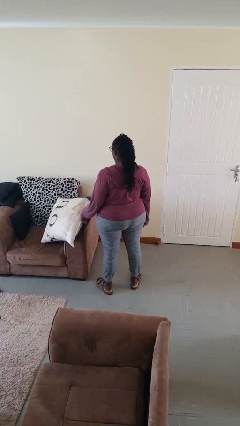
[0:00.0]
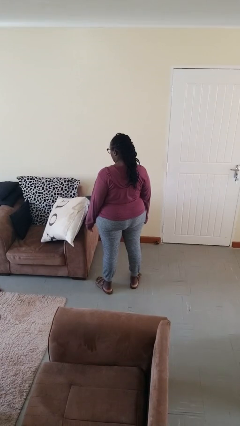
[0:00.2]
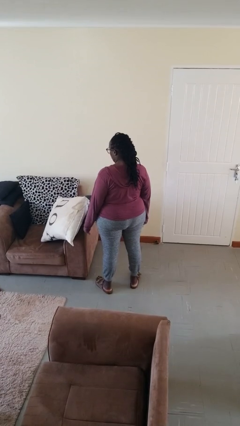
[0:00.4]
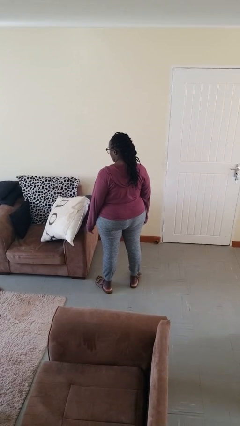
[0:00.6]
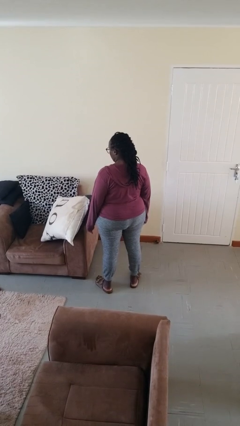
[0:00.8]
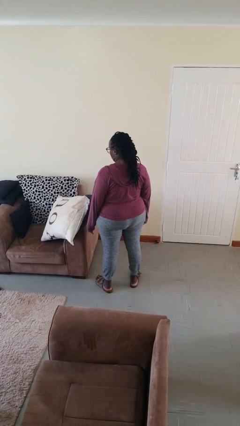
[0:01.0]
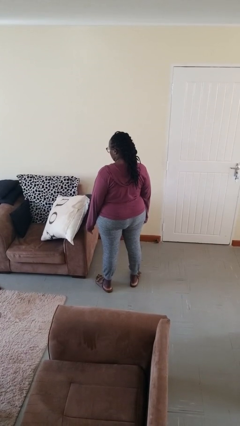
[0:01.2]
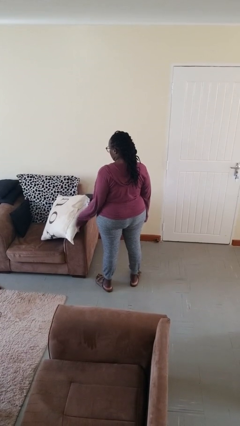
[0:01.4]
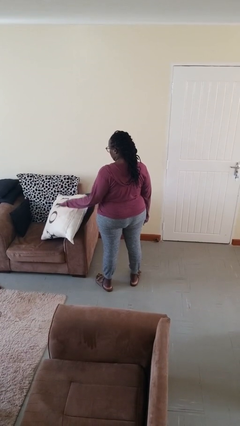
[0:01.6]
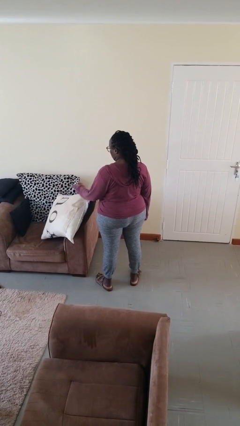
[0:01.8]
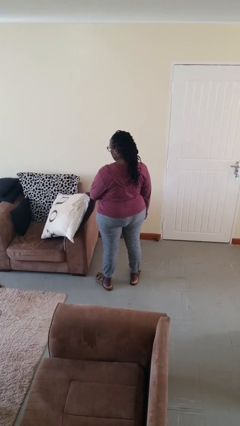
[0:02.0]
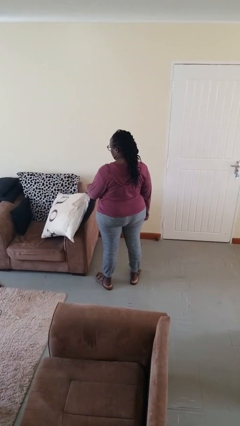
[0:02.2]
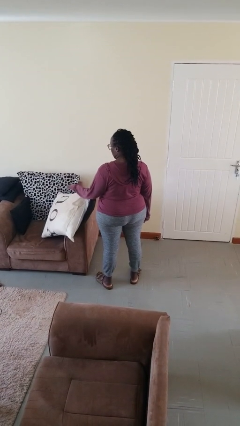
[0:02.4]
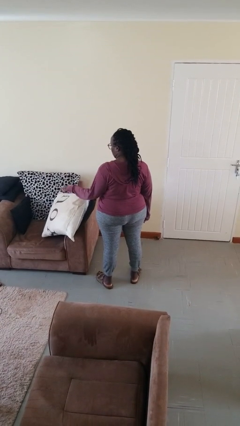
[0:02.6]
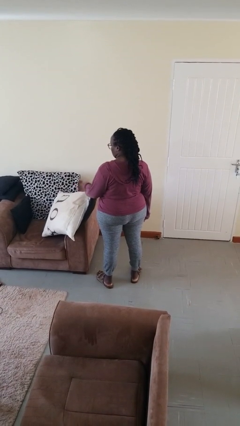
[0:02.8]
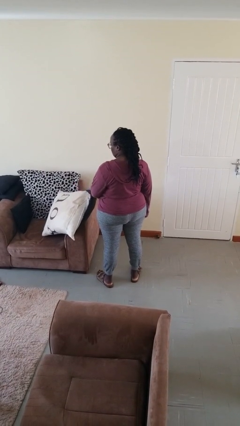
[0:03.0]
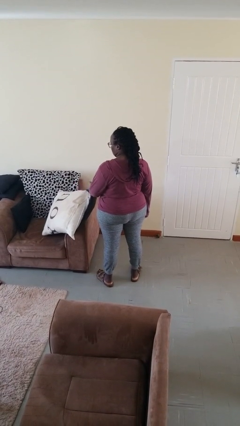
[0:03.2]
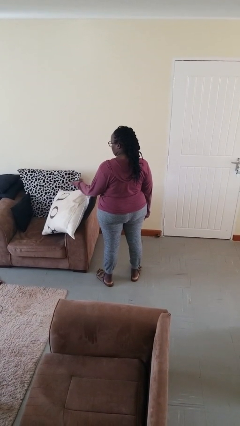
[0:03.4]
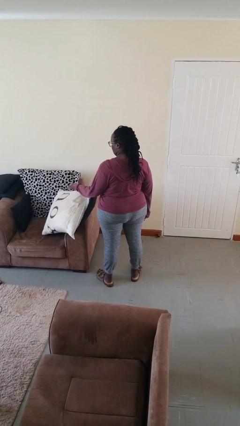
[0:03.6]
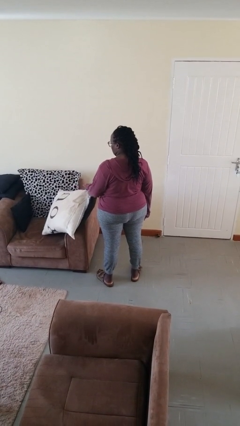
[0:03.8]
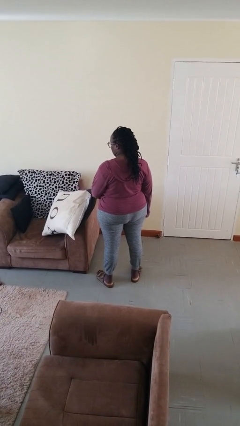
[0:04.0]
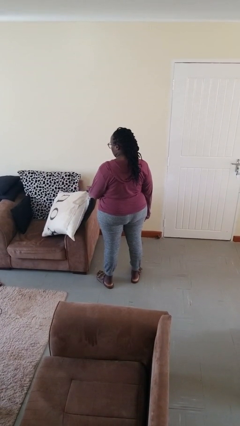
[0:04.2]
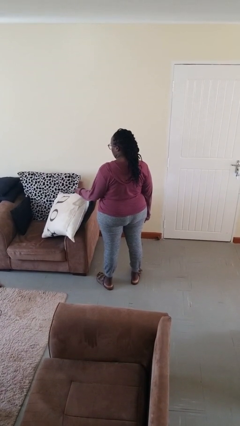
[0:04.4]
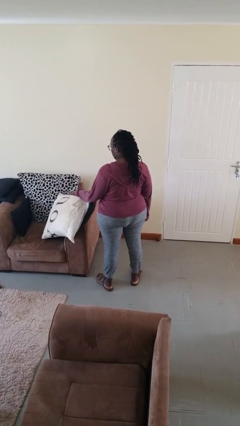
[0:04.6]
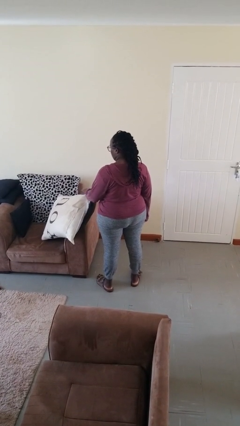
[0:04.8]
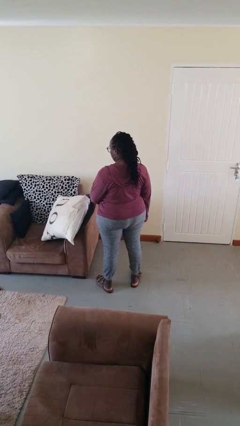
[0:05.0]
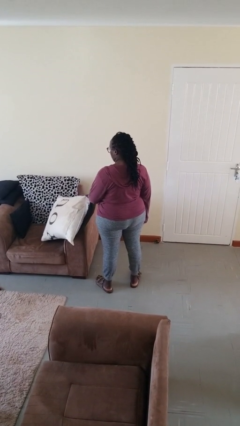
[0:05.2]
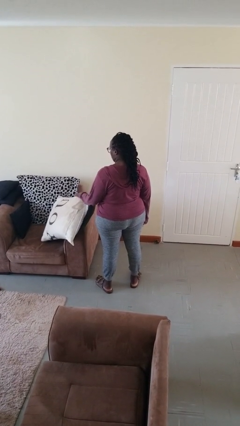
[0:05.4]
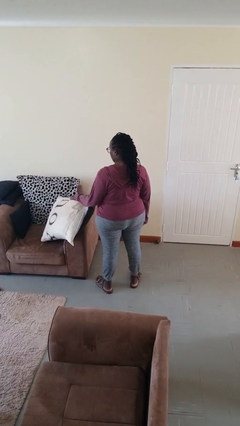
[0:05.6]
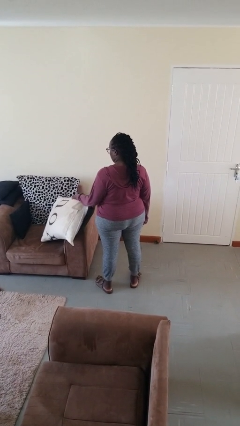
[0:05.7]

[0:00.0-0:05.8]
person waves hand over object

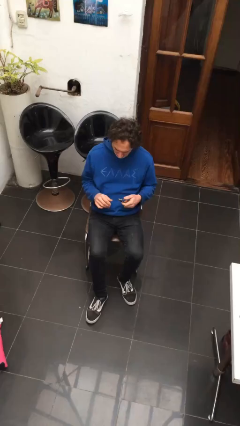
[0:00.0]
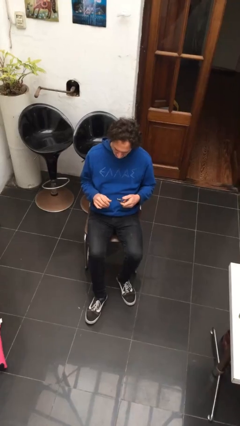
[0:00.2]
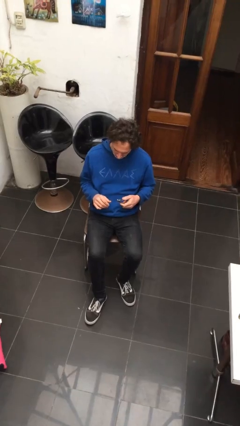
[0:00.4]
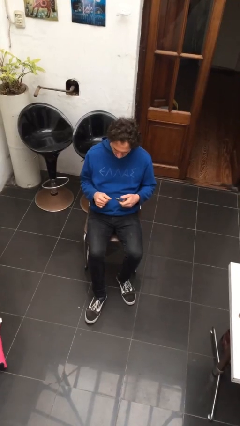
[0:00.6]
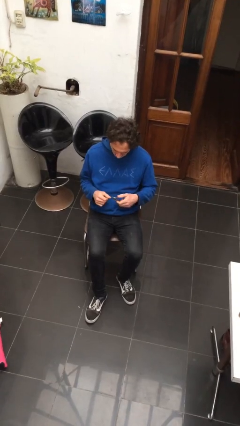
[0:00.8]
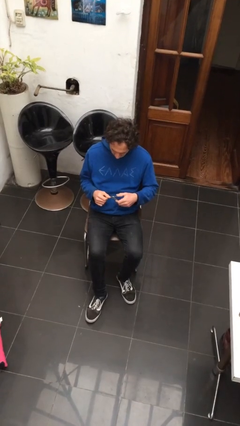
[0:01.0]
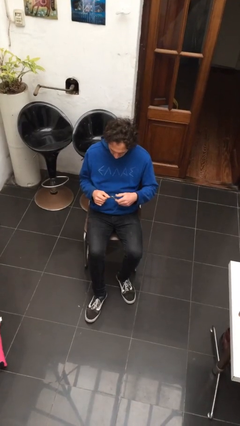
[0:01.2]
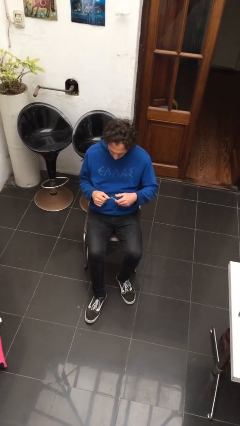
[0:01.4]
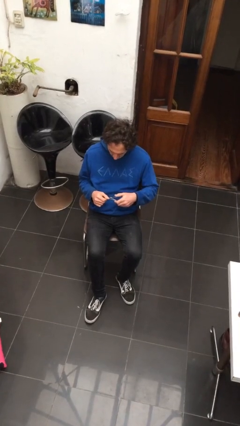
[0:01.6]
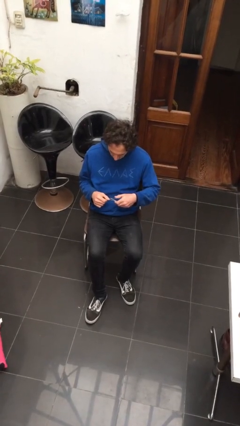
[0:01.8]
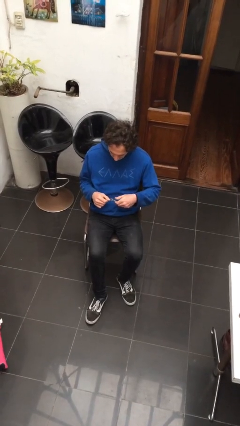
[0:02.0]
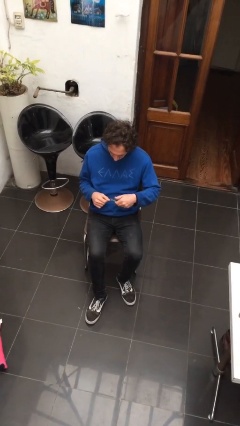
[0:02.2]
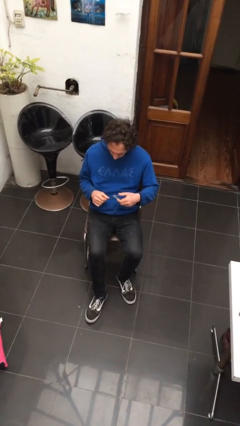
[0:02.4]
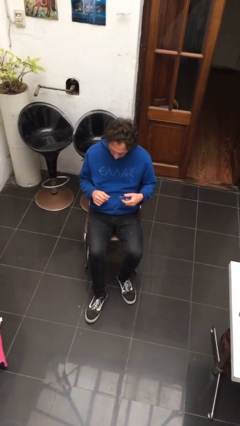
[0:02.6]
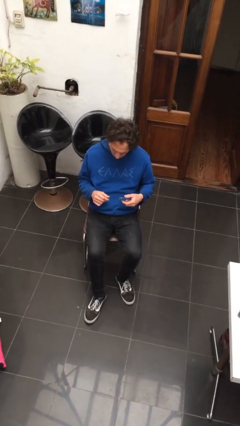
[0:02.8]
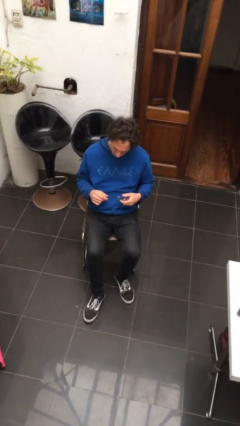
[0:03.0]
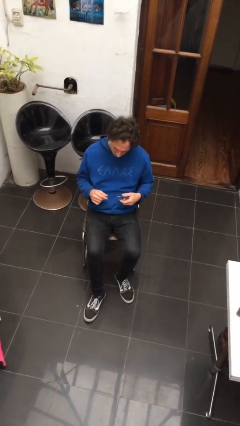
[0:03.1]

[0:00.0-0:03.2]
person clips fingernails

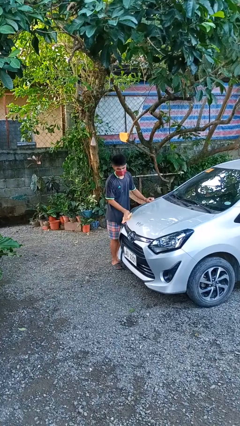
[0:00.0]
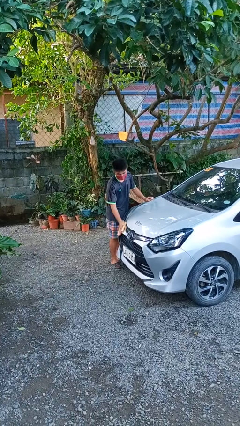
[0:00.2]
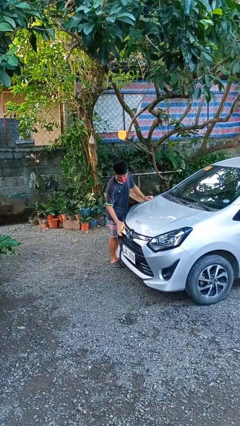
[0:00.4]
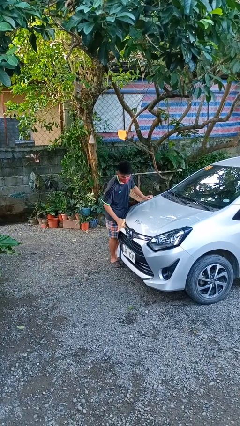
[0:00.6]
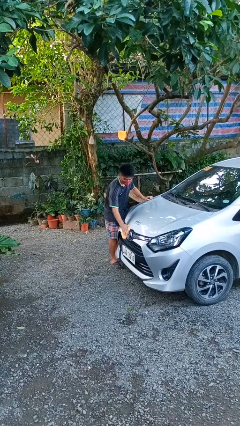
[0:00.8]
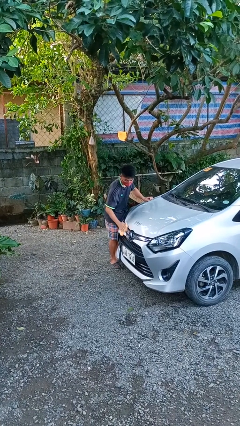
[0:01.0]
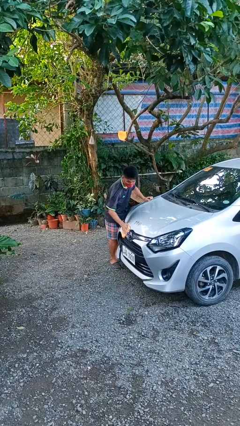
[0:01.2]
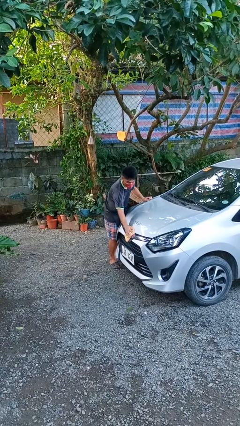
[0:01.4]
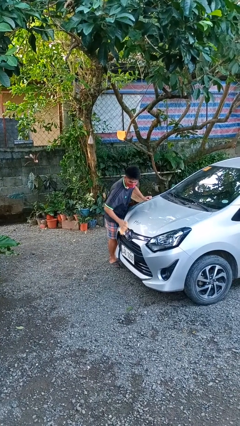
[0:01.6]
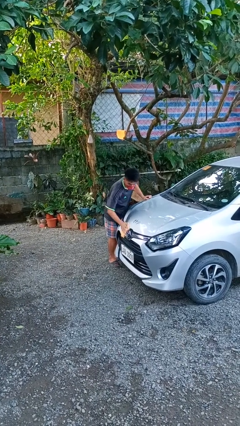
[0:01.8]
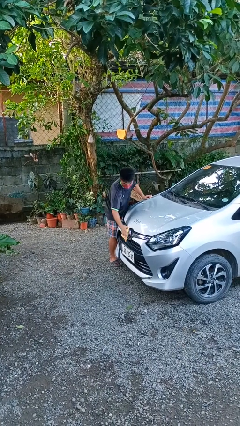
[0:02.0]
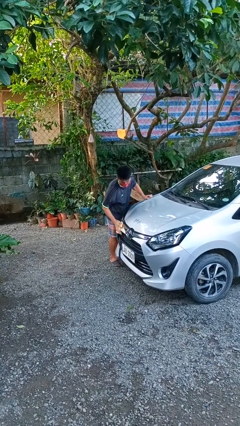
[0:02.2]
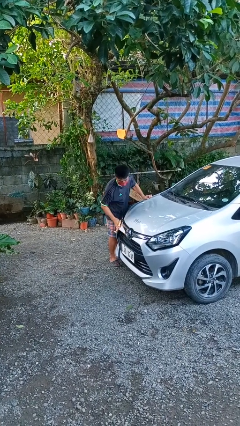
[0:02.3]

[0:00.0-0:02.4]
person polishes car with rag

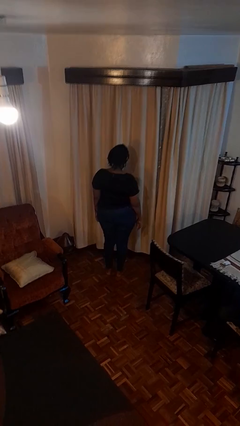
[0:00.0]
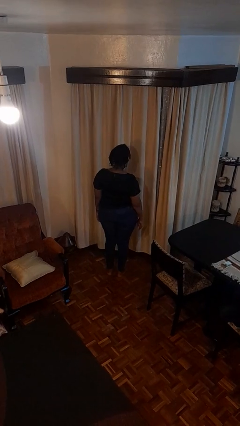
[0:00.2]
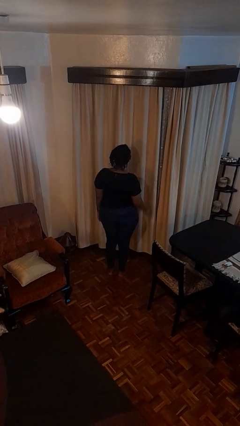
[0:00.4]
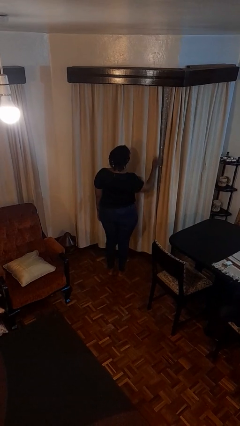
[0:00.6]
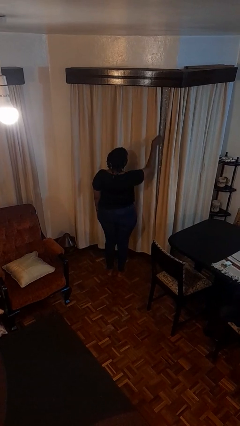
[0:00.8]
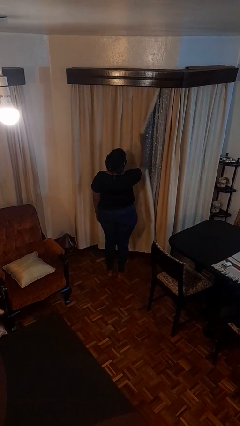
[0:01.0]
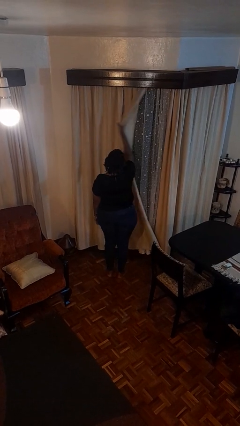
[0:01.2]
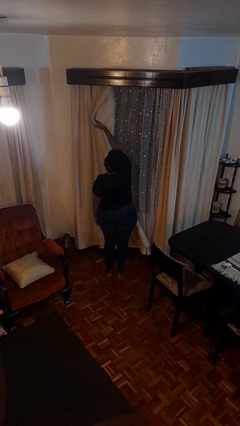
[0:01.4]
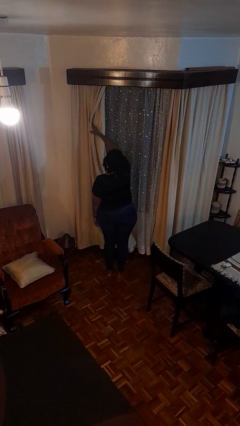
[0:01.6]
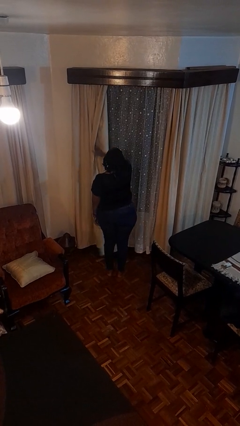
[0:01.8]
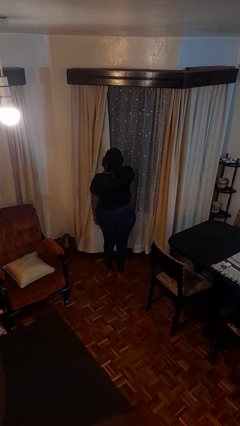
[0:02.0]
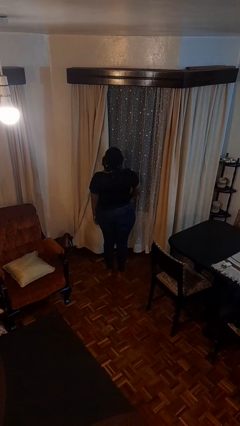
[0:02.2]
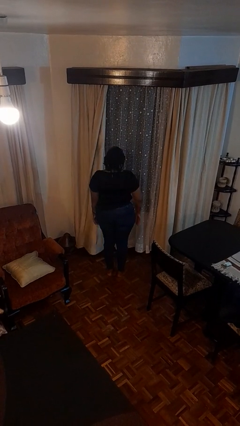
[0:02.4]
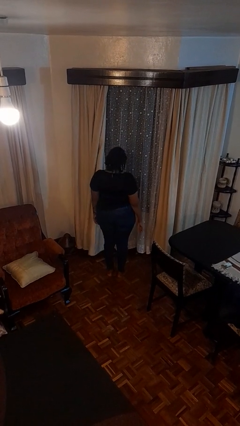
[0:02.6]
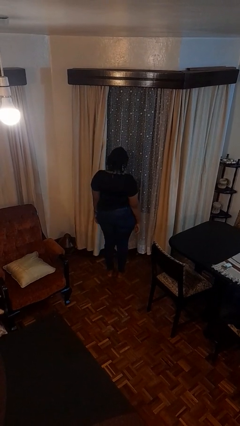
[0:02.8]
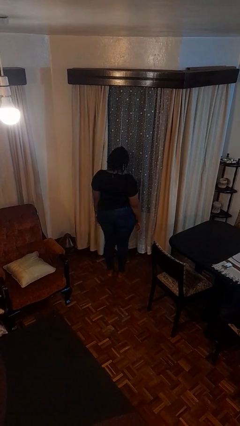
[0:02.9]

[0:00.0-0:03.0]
person opens curtains

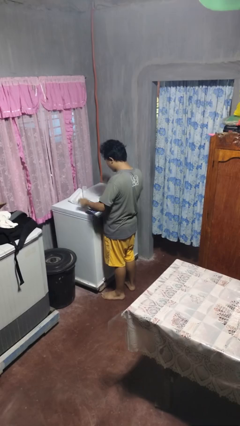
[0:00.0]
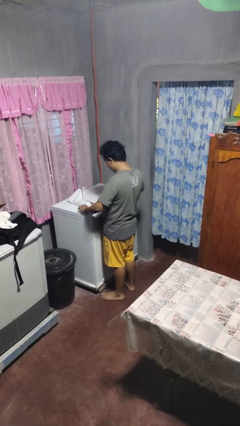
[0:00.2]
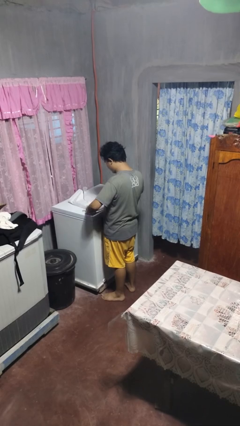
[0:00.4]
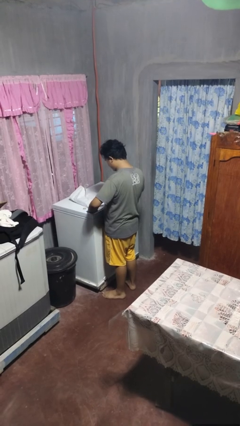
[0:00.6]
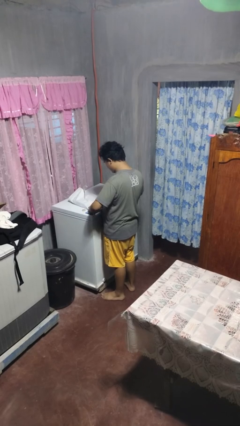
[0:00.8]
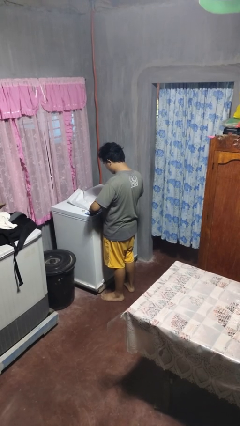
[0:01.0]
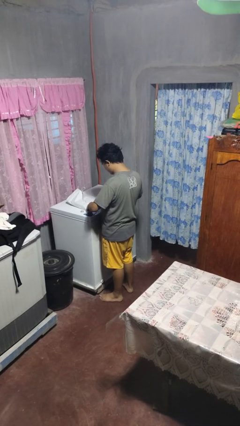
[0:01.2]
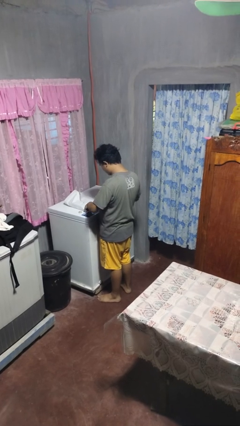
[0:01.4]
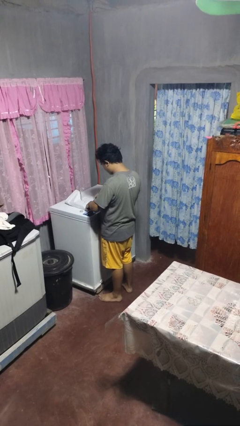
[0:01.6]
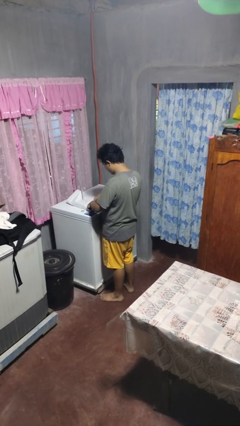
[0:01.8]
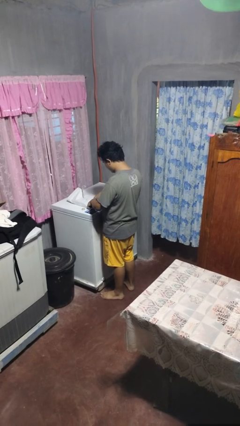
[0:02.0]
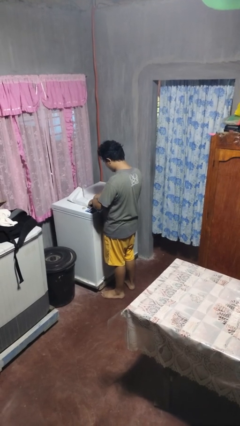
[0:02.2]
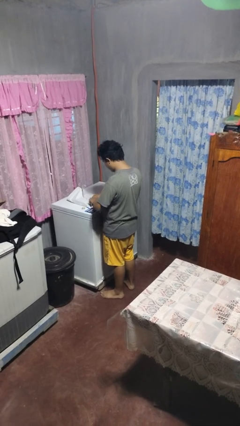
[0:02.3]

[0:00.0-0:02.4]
person wraps box

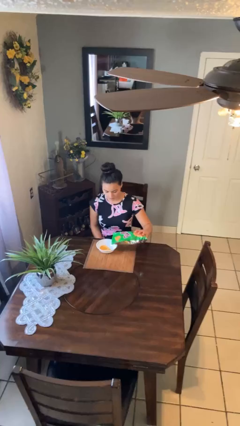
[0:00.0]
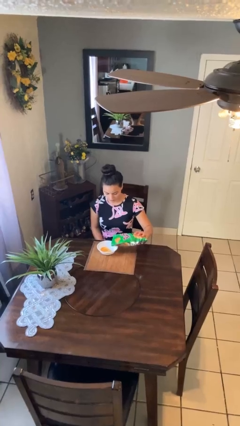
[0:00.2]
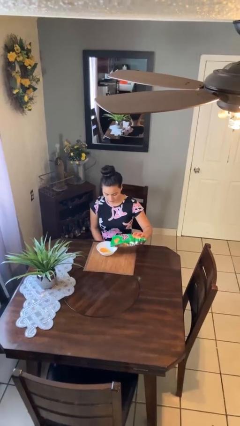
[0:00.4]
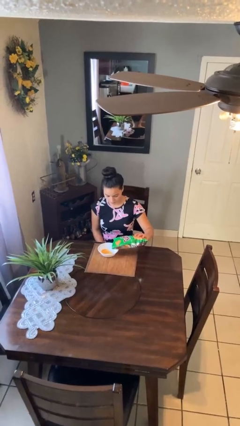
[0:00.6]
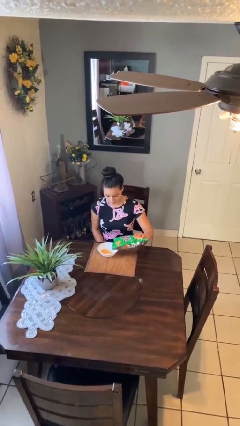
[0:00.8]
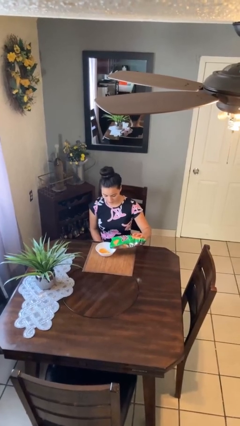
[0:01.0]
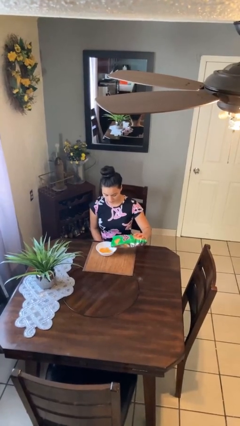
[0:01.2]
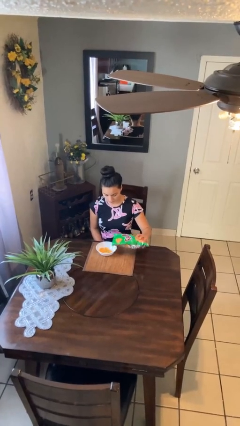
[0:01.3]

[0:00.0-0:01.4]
person pours into bowl
